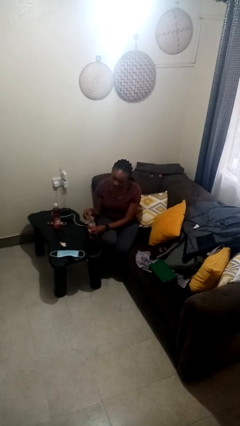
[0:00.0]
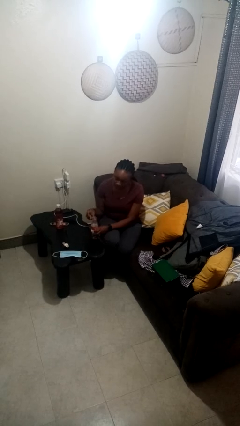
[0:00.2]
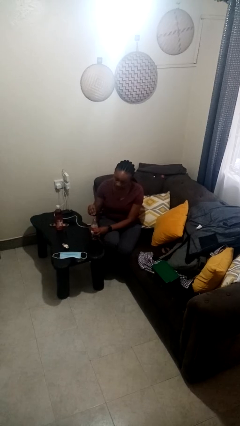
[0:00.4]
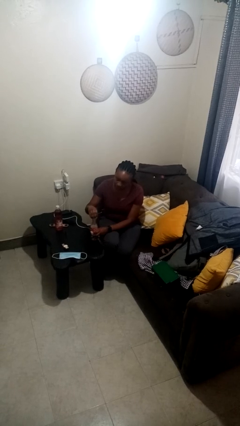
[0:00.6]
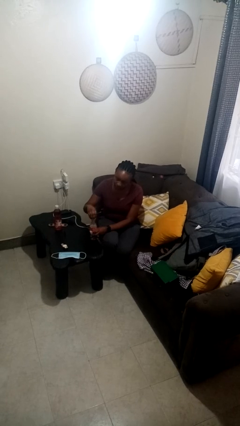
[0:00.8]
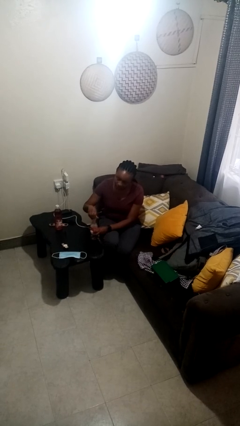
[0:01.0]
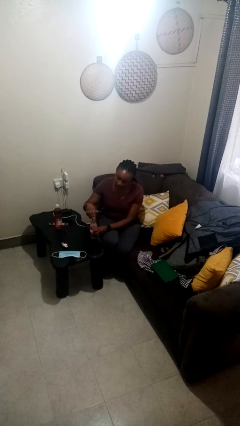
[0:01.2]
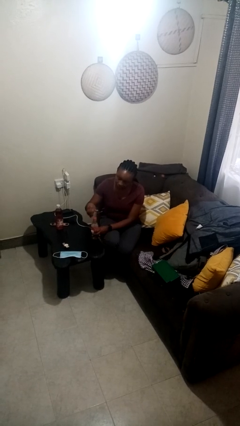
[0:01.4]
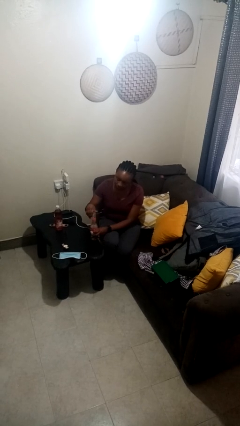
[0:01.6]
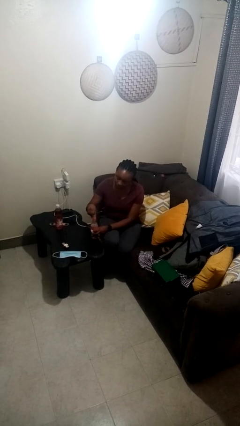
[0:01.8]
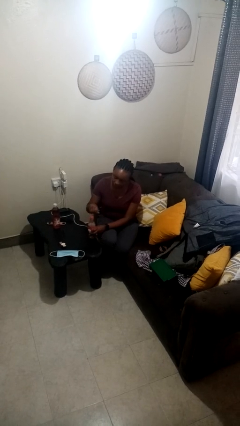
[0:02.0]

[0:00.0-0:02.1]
person screws lid to bottle

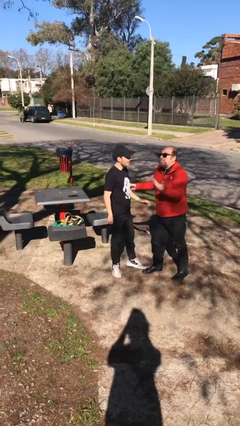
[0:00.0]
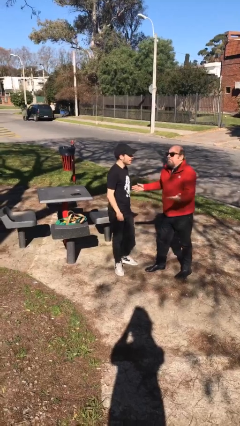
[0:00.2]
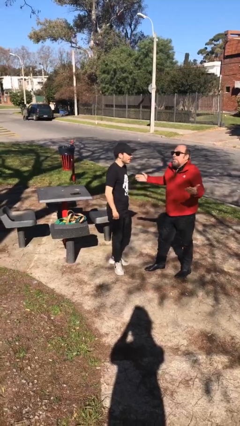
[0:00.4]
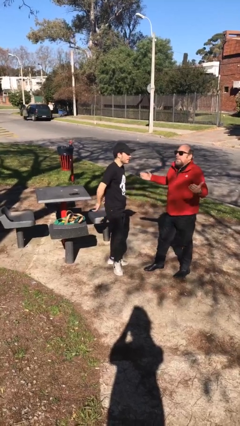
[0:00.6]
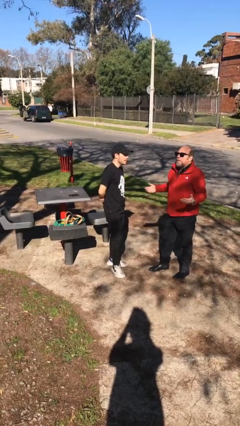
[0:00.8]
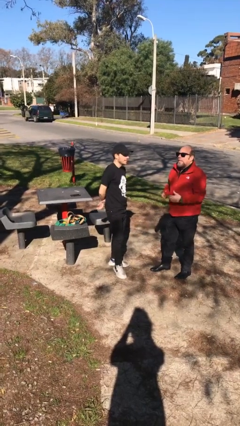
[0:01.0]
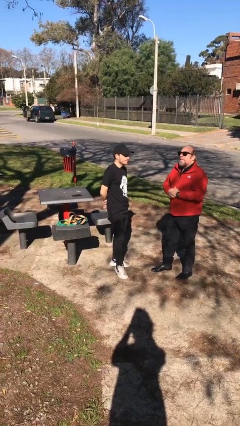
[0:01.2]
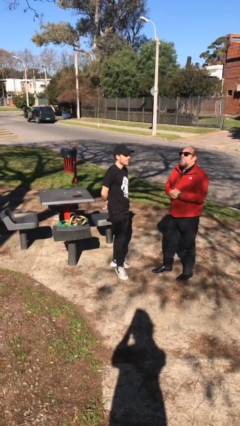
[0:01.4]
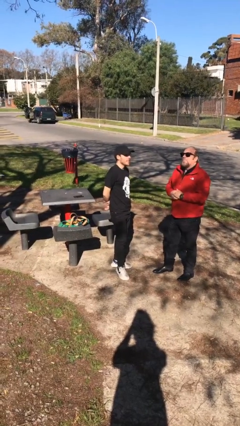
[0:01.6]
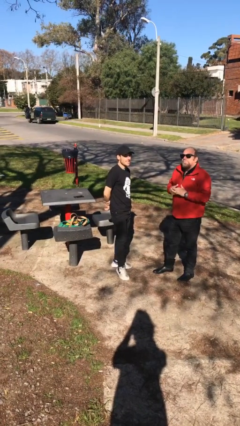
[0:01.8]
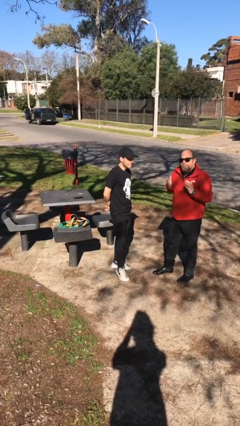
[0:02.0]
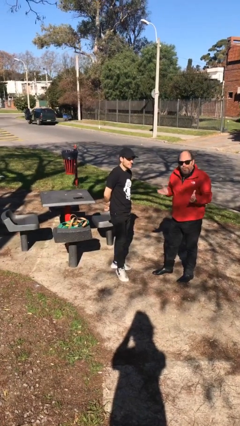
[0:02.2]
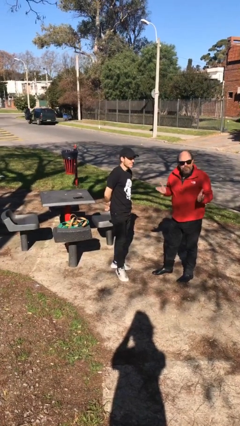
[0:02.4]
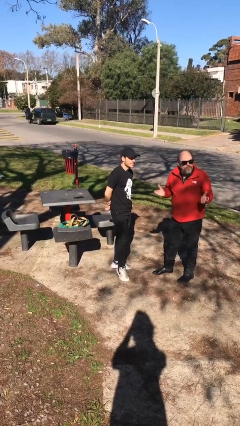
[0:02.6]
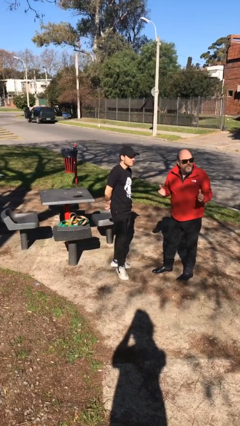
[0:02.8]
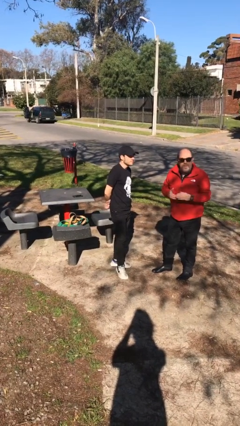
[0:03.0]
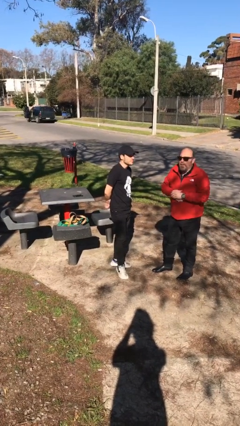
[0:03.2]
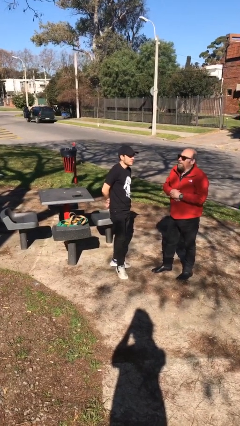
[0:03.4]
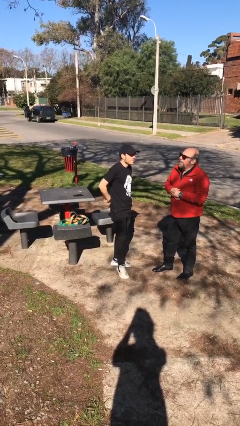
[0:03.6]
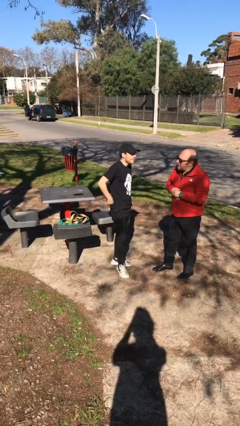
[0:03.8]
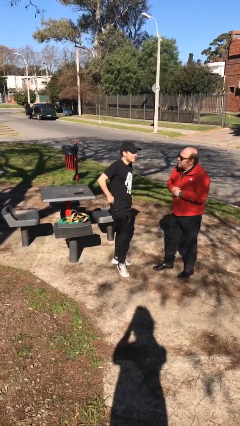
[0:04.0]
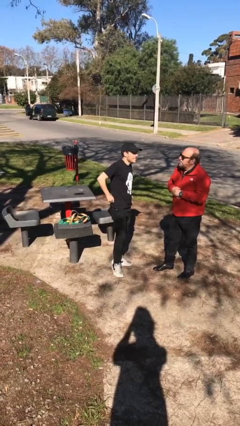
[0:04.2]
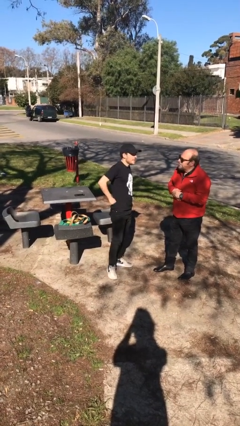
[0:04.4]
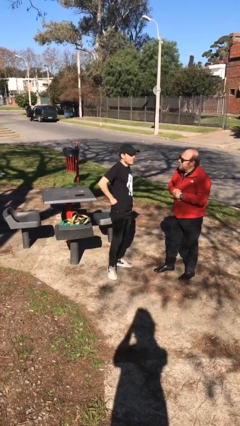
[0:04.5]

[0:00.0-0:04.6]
person talks to person

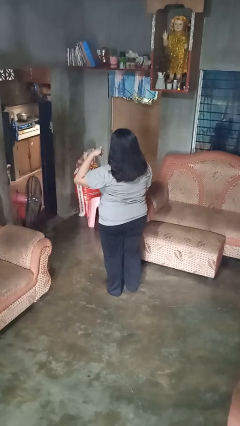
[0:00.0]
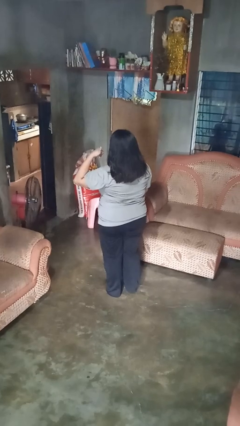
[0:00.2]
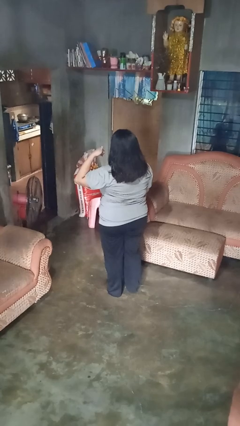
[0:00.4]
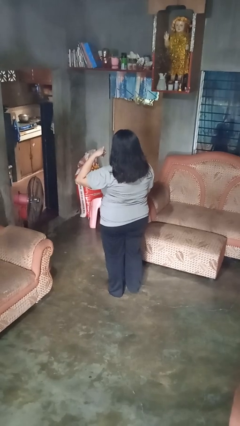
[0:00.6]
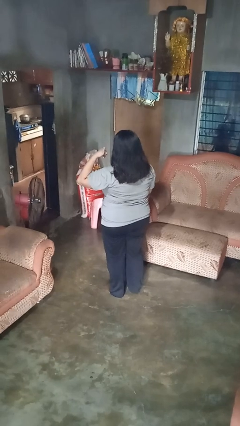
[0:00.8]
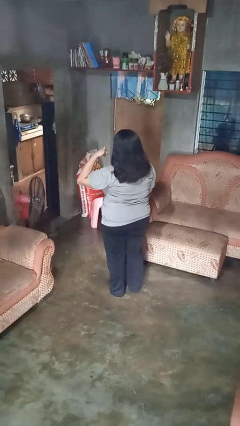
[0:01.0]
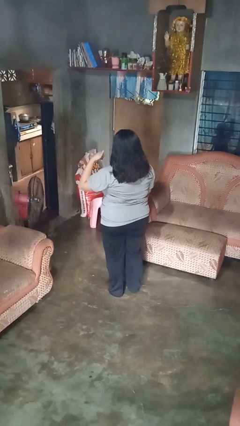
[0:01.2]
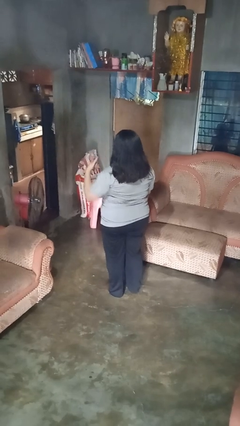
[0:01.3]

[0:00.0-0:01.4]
person gestures call me

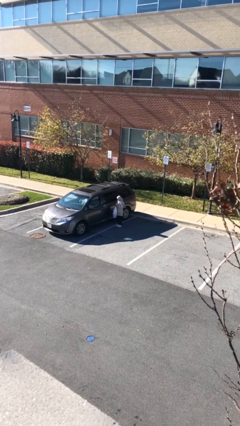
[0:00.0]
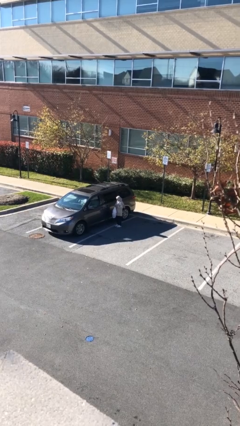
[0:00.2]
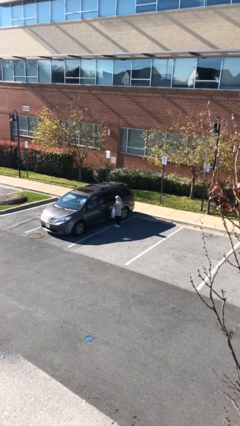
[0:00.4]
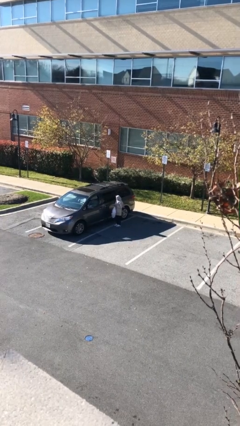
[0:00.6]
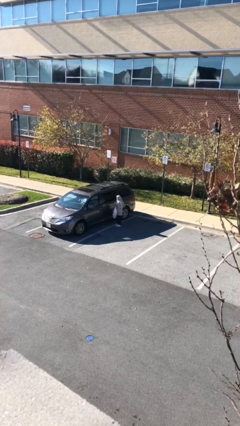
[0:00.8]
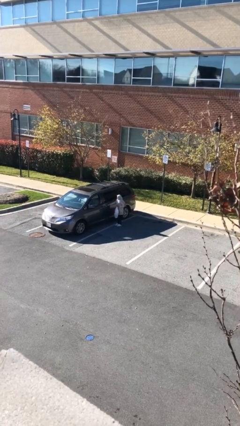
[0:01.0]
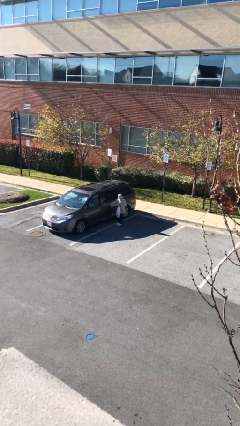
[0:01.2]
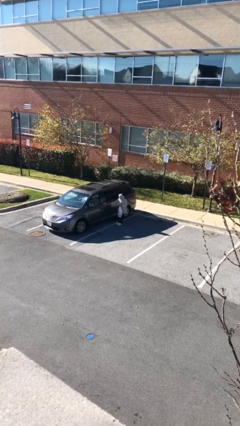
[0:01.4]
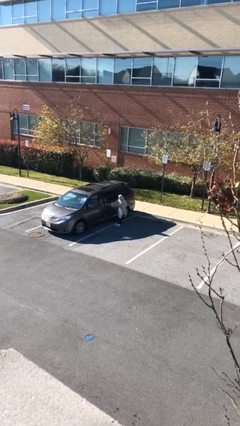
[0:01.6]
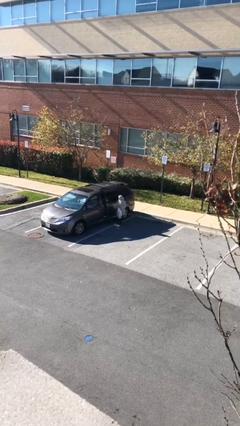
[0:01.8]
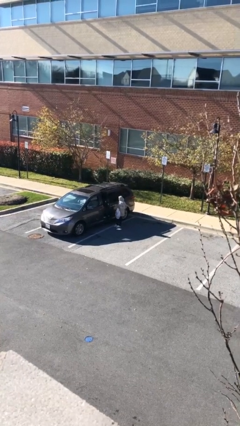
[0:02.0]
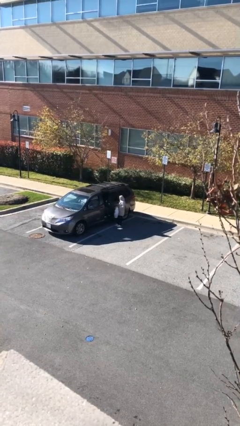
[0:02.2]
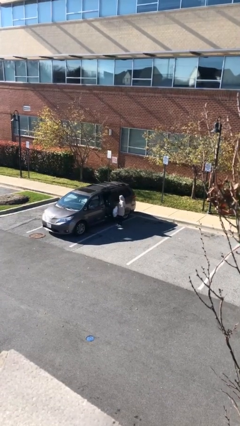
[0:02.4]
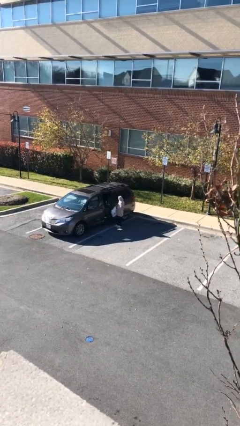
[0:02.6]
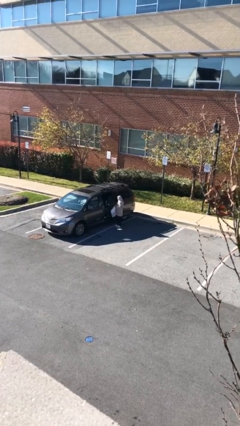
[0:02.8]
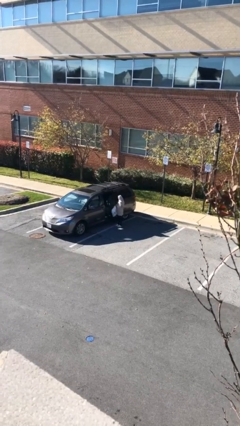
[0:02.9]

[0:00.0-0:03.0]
person opens car door

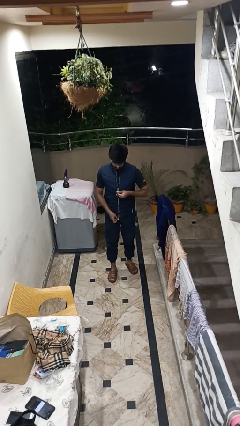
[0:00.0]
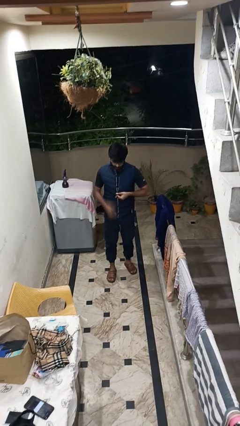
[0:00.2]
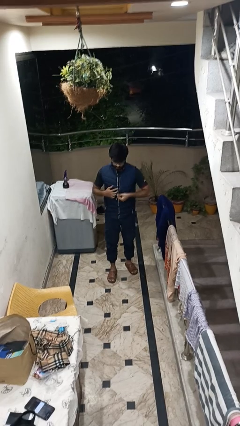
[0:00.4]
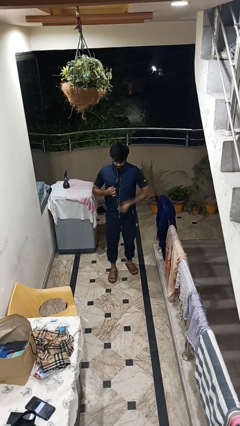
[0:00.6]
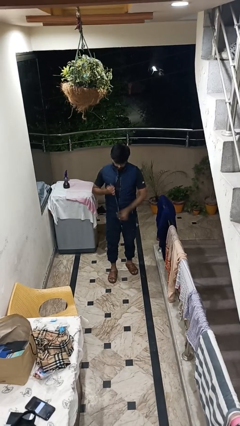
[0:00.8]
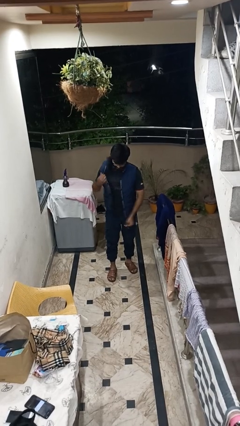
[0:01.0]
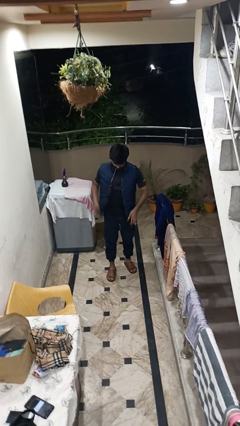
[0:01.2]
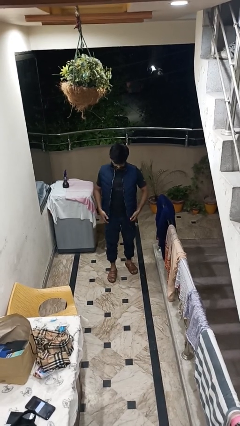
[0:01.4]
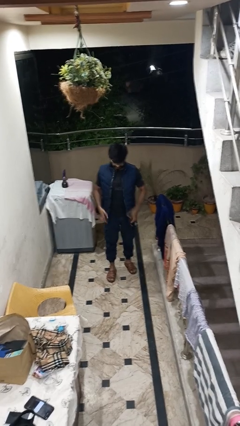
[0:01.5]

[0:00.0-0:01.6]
person unzips jacket

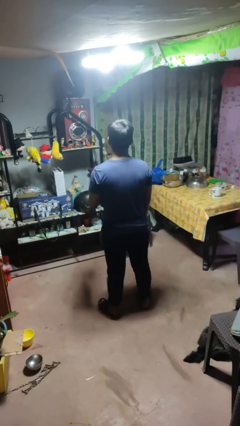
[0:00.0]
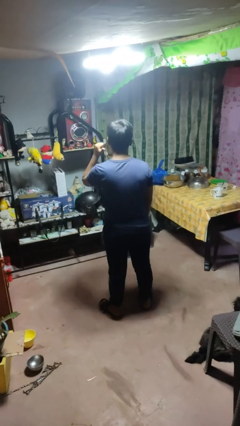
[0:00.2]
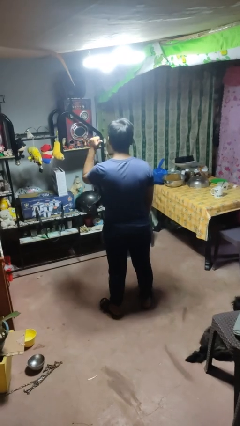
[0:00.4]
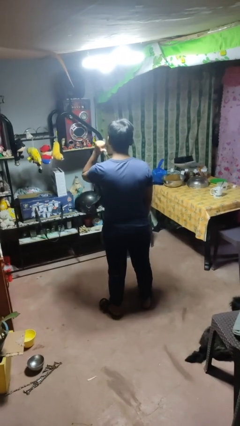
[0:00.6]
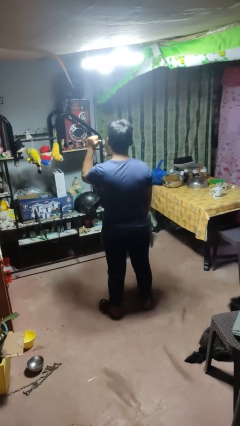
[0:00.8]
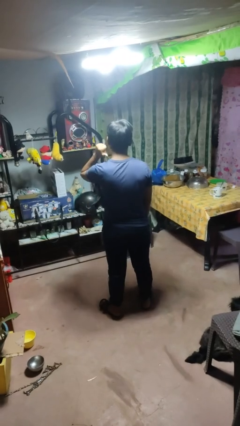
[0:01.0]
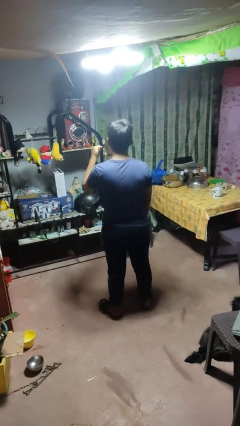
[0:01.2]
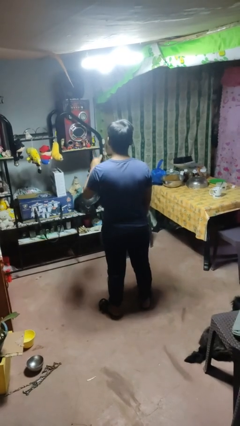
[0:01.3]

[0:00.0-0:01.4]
person gestures behind me

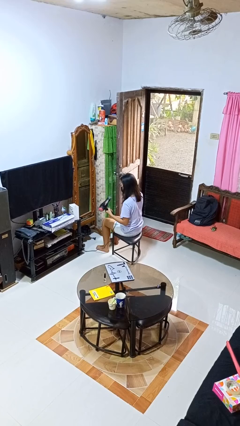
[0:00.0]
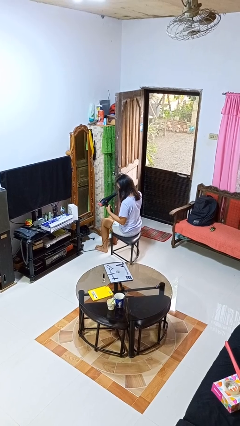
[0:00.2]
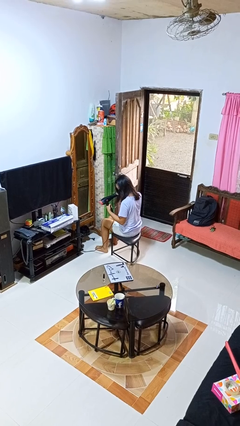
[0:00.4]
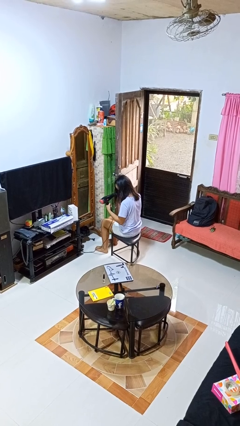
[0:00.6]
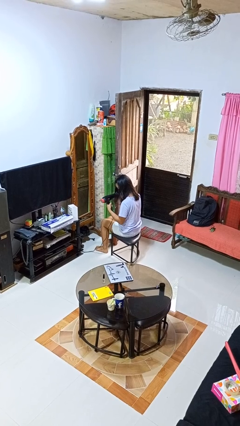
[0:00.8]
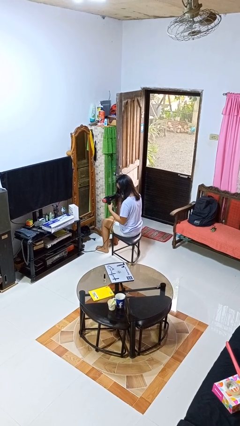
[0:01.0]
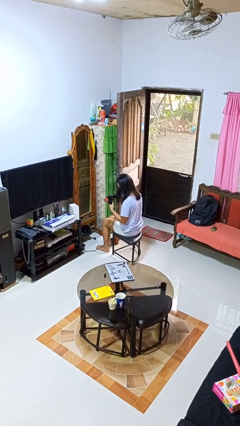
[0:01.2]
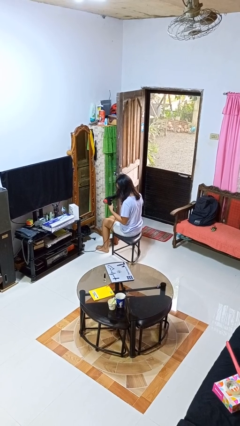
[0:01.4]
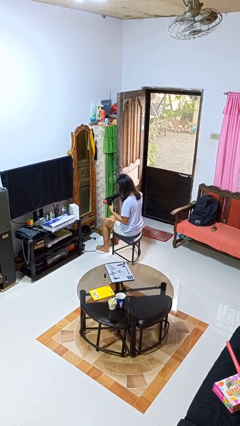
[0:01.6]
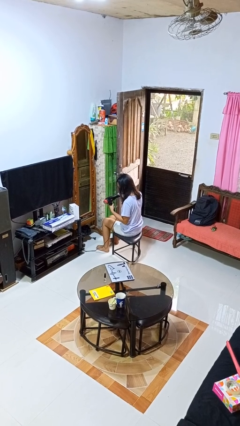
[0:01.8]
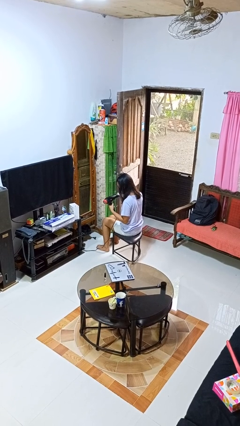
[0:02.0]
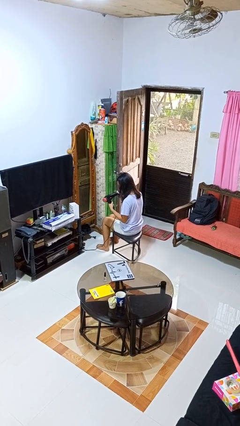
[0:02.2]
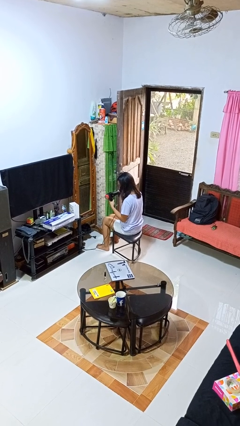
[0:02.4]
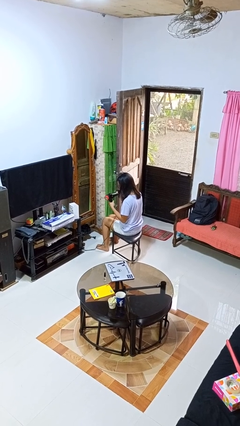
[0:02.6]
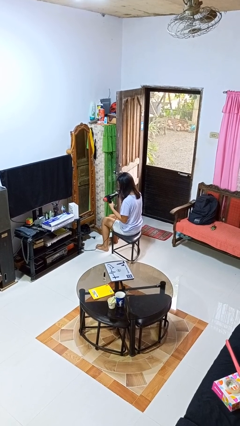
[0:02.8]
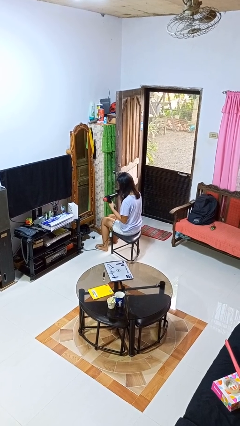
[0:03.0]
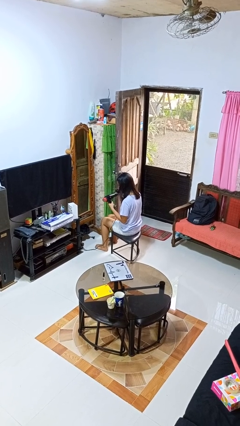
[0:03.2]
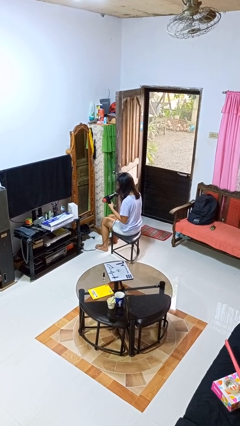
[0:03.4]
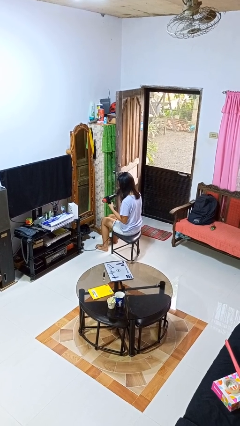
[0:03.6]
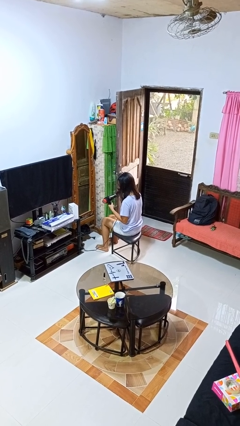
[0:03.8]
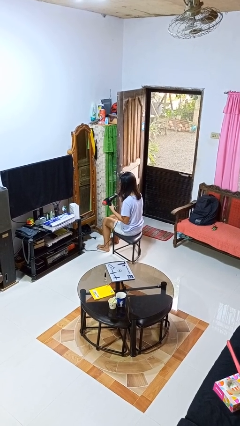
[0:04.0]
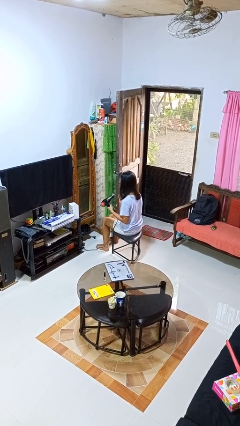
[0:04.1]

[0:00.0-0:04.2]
person dries hair with hairdryer
